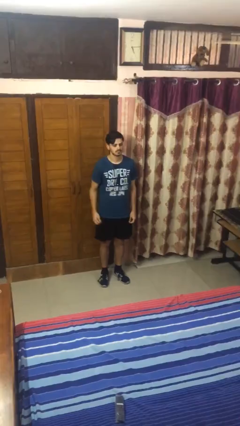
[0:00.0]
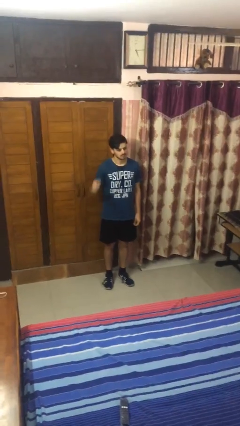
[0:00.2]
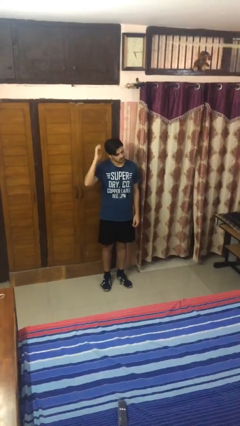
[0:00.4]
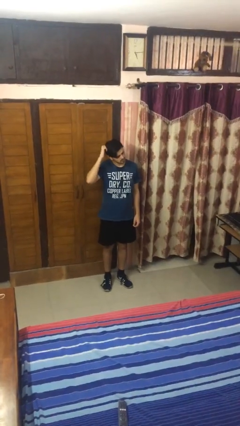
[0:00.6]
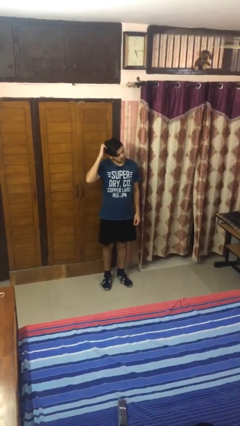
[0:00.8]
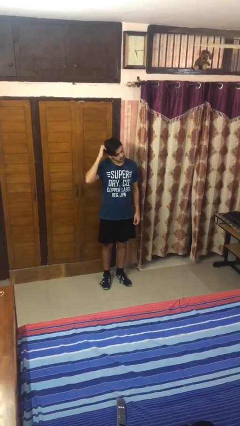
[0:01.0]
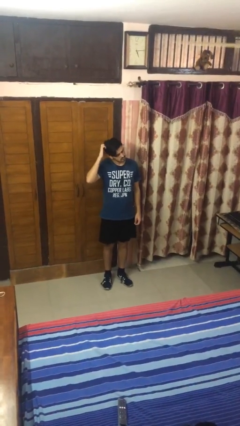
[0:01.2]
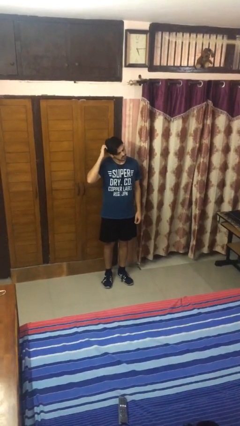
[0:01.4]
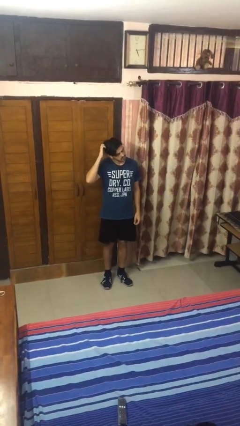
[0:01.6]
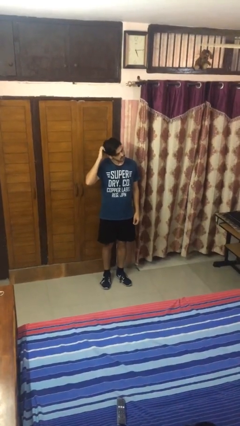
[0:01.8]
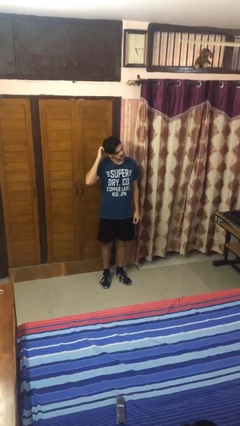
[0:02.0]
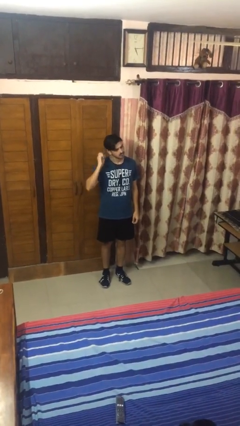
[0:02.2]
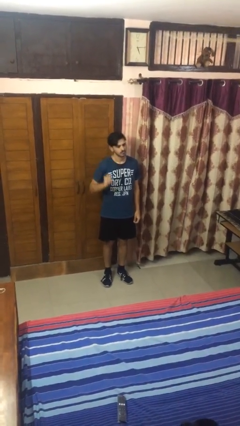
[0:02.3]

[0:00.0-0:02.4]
person scratches face

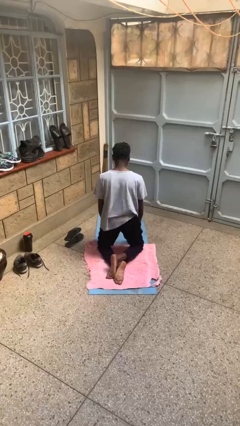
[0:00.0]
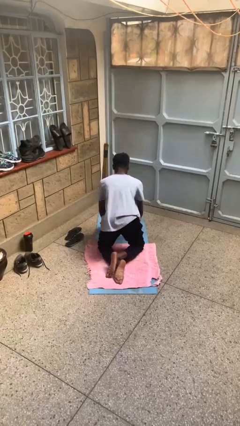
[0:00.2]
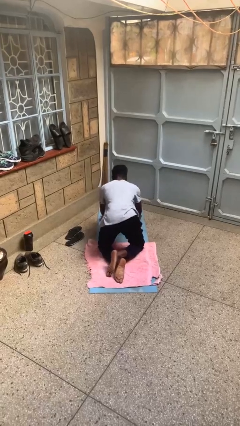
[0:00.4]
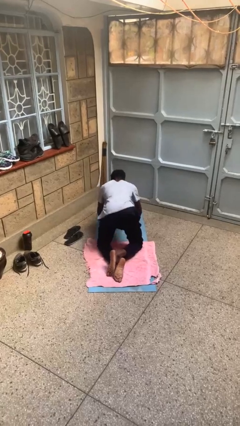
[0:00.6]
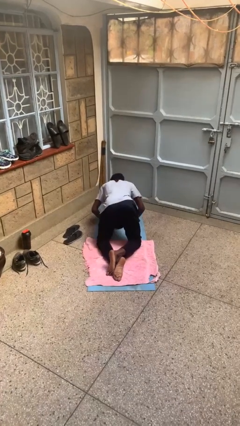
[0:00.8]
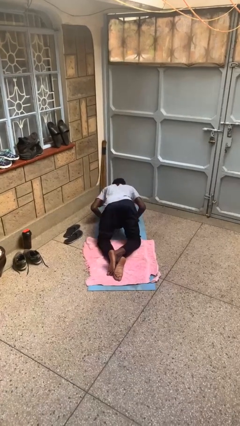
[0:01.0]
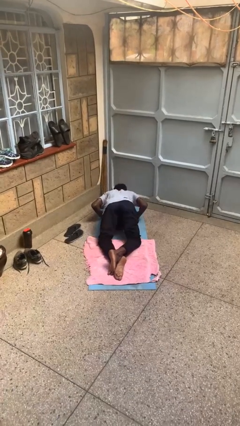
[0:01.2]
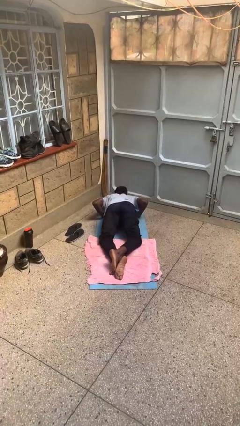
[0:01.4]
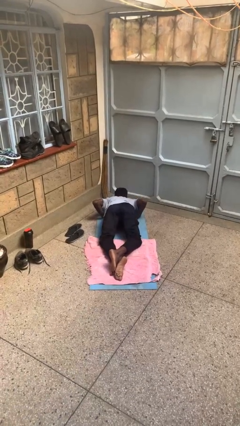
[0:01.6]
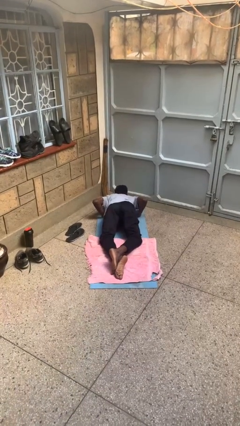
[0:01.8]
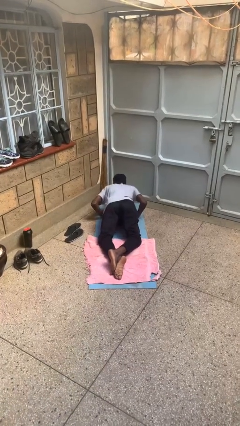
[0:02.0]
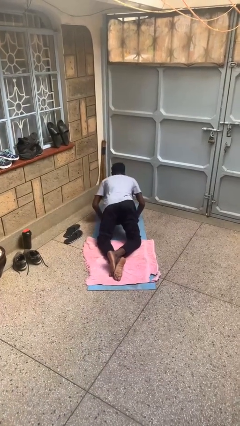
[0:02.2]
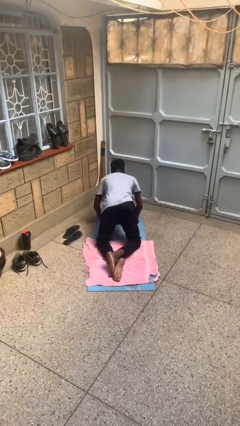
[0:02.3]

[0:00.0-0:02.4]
person exercises with pushup

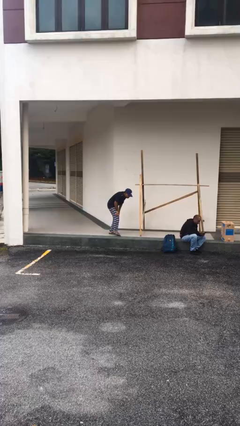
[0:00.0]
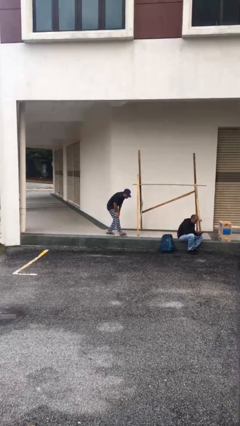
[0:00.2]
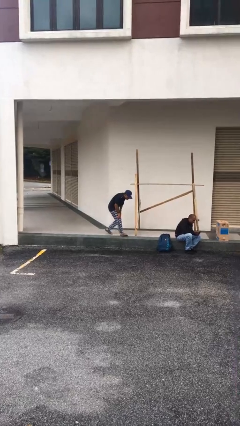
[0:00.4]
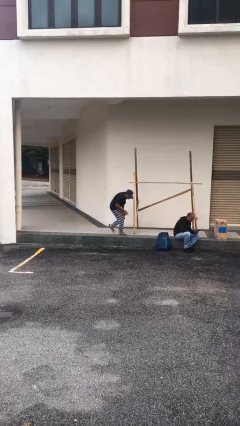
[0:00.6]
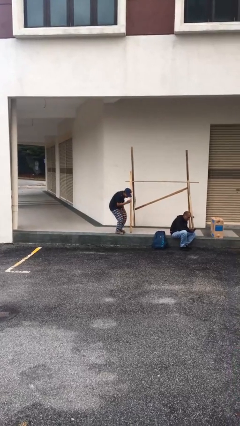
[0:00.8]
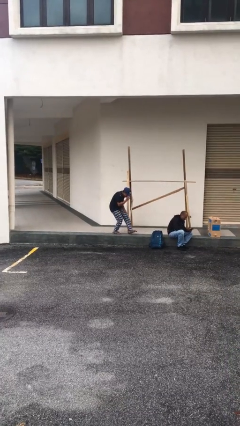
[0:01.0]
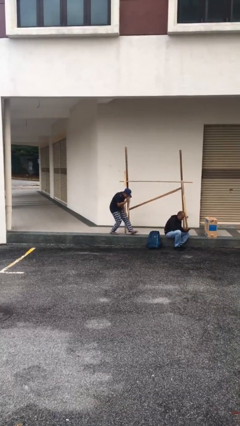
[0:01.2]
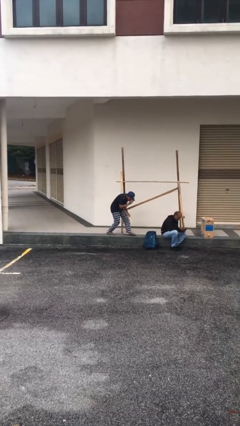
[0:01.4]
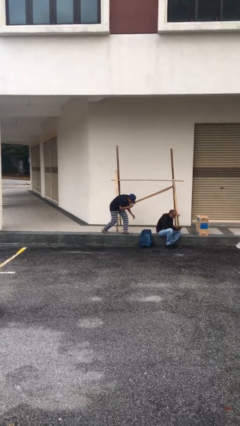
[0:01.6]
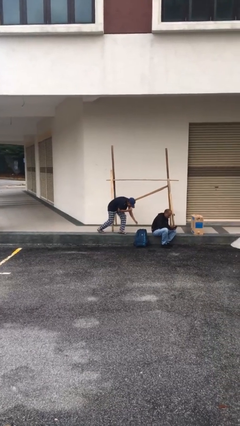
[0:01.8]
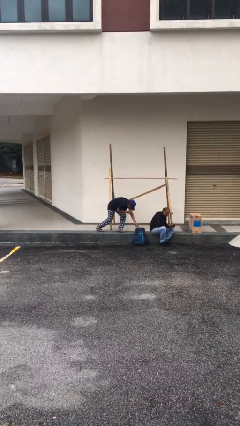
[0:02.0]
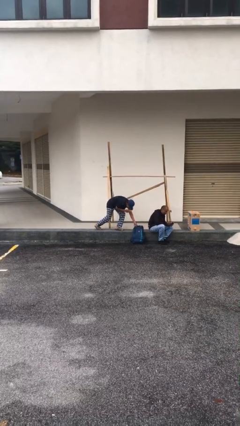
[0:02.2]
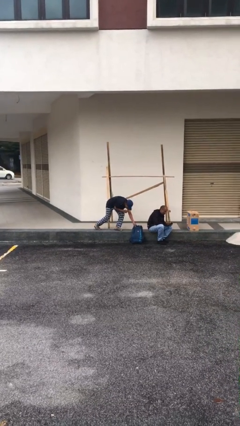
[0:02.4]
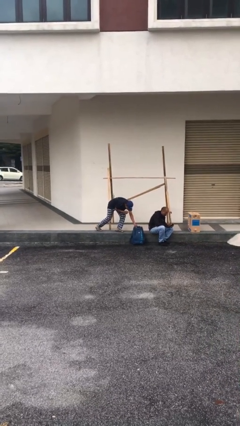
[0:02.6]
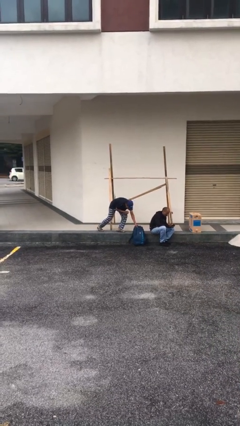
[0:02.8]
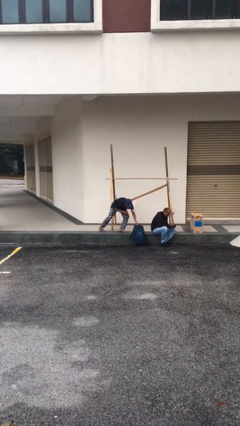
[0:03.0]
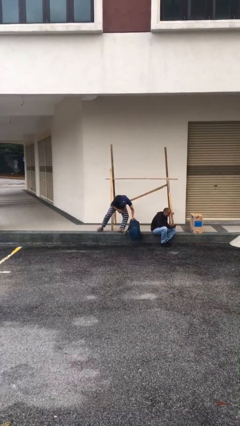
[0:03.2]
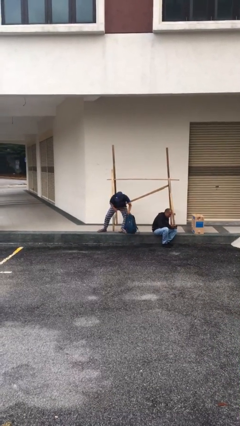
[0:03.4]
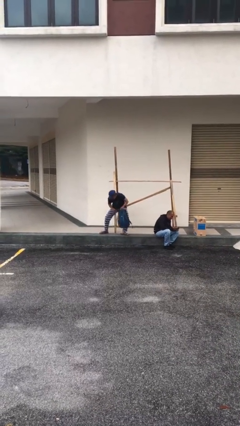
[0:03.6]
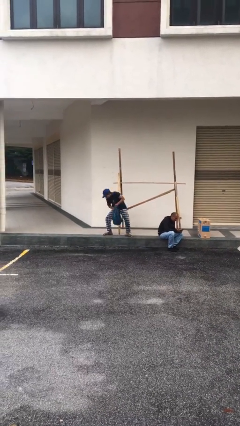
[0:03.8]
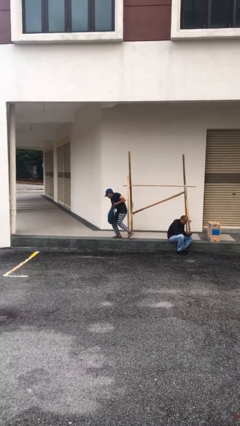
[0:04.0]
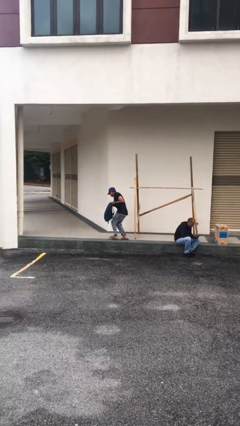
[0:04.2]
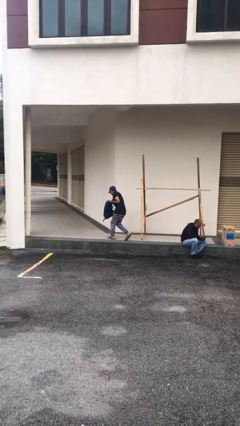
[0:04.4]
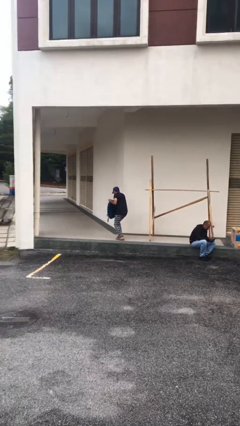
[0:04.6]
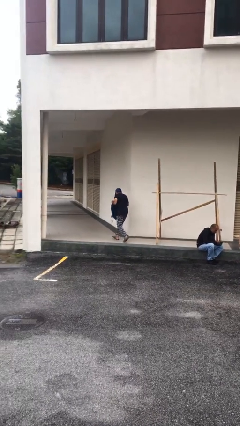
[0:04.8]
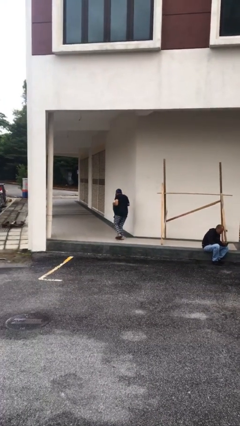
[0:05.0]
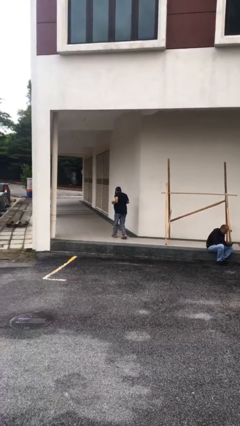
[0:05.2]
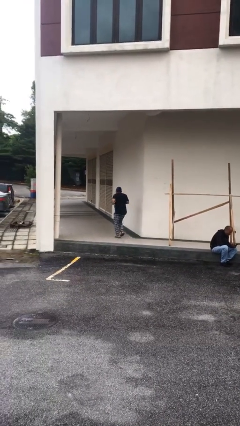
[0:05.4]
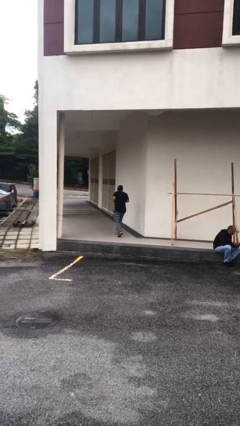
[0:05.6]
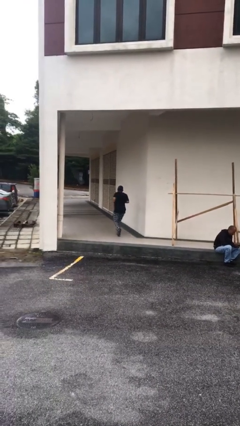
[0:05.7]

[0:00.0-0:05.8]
person steals object from person

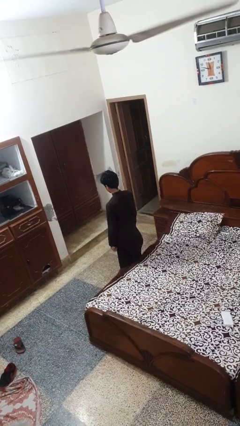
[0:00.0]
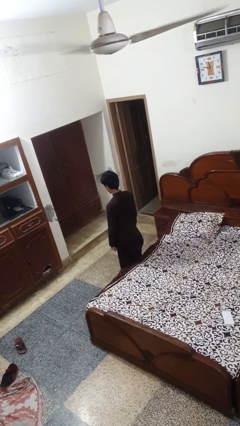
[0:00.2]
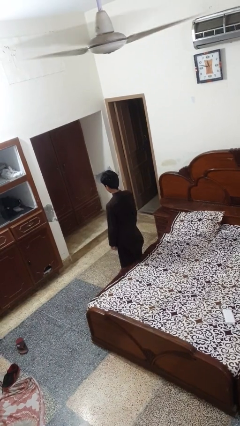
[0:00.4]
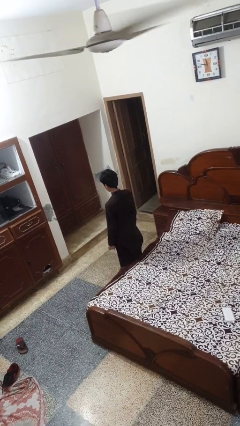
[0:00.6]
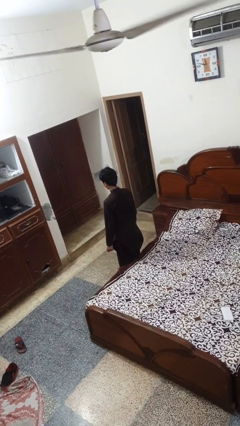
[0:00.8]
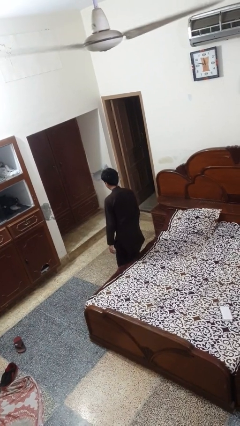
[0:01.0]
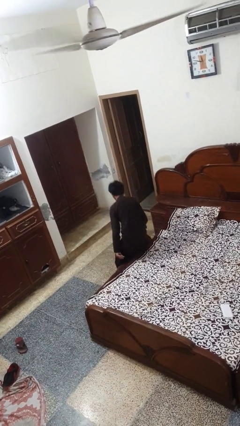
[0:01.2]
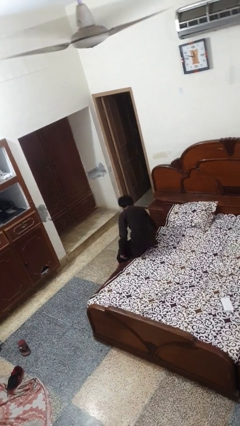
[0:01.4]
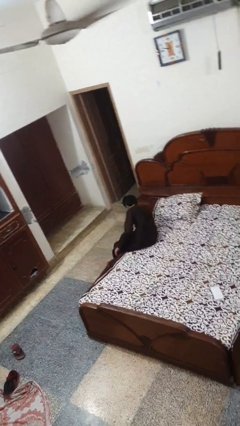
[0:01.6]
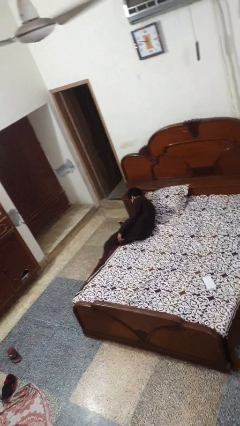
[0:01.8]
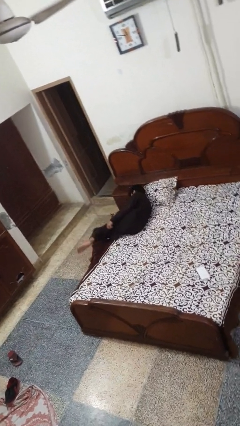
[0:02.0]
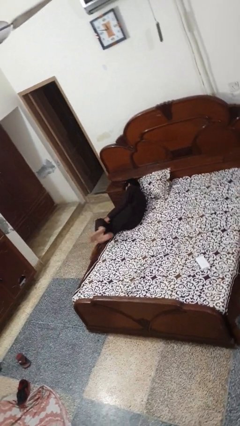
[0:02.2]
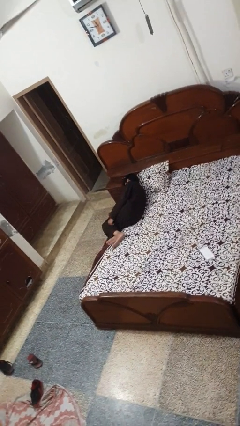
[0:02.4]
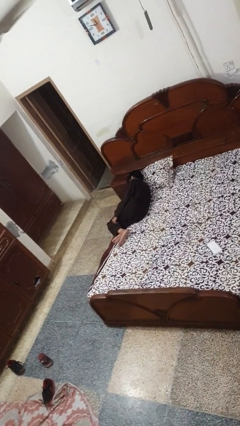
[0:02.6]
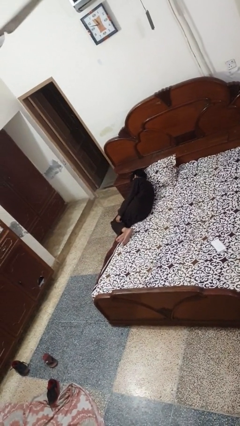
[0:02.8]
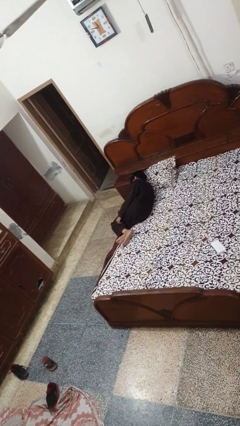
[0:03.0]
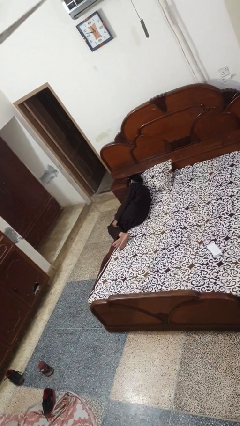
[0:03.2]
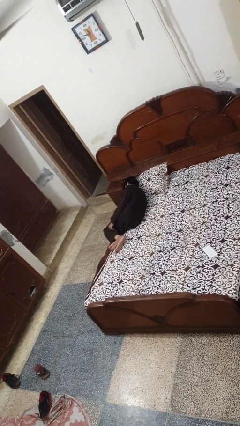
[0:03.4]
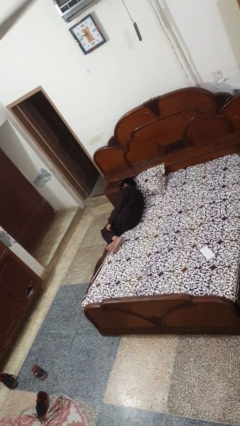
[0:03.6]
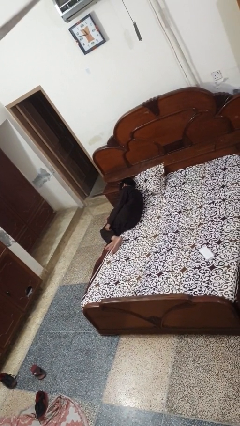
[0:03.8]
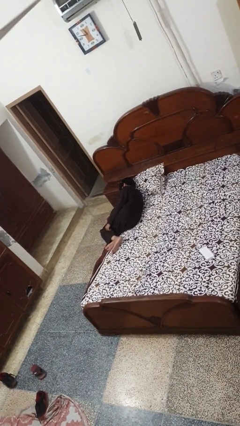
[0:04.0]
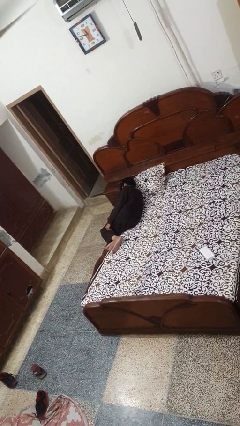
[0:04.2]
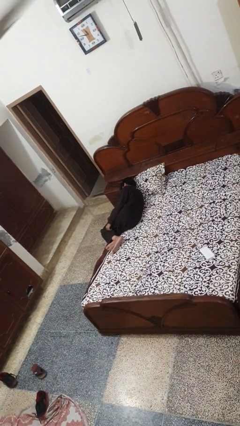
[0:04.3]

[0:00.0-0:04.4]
person lies down on bed

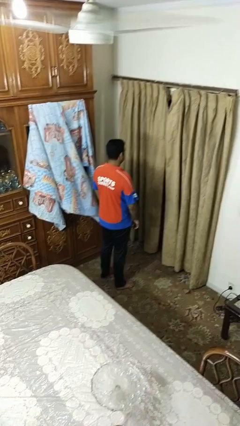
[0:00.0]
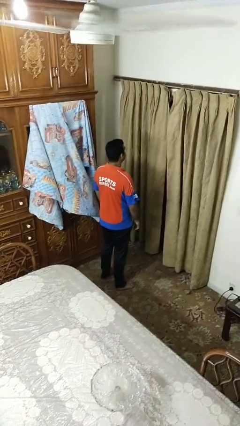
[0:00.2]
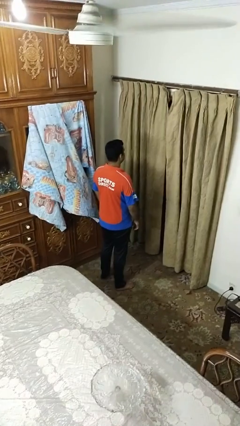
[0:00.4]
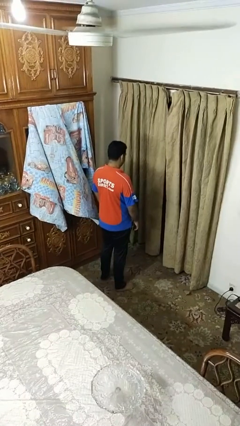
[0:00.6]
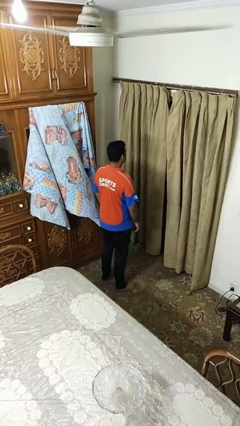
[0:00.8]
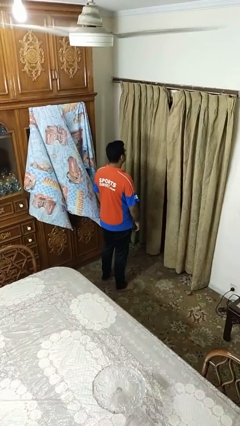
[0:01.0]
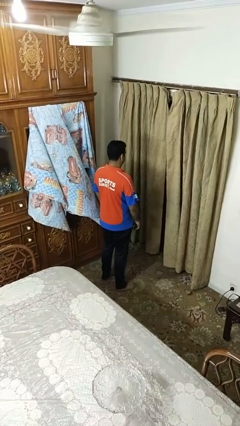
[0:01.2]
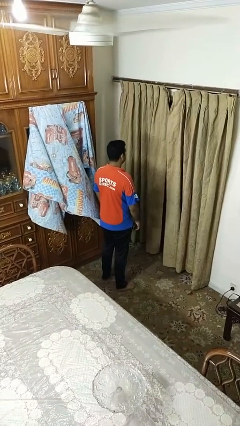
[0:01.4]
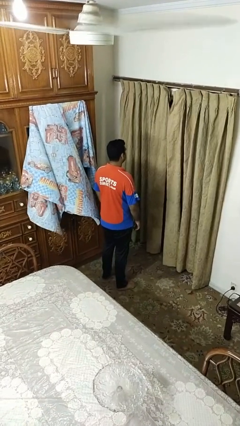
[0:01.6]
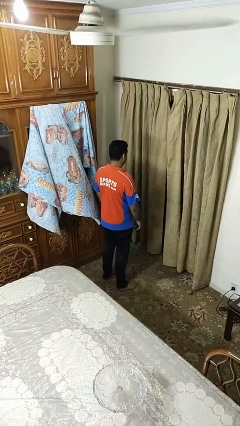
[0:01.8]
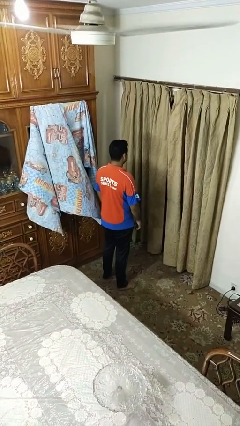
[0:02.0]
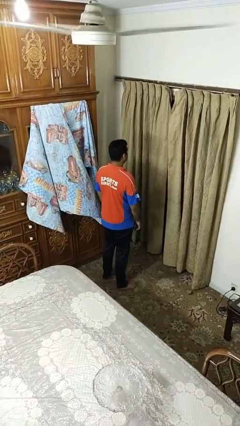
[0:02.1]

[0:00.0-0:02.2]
person nods head

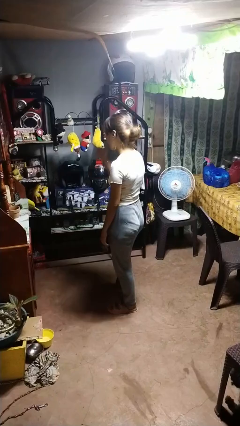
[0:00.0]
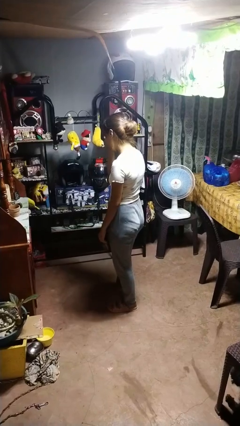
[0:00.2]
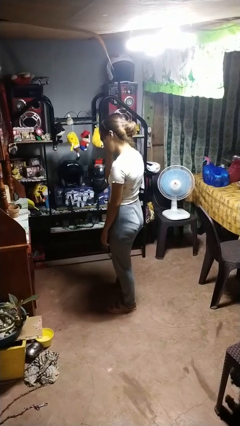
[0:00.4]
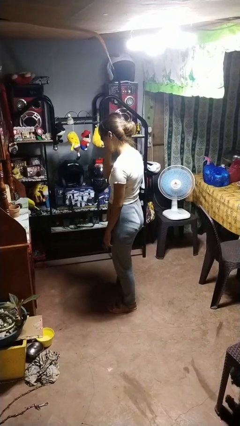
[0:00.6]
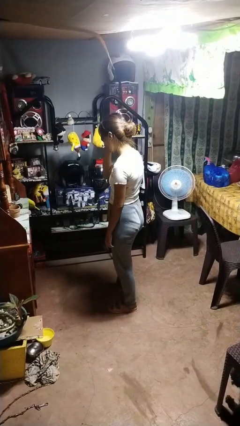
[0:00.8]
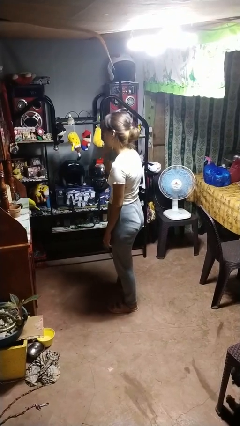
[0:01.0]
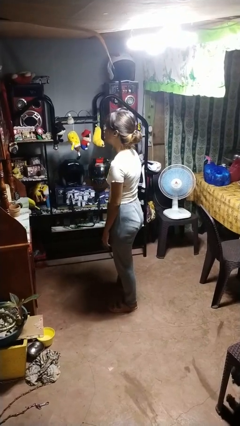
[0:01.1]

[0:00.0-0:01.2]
person rubs eyes
